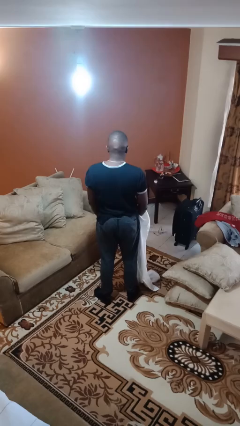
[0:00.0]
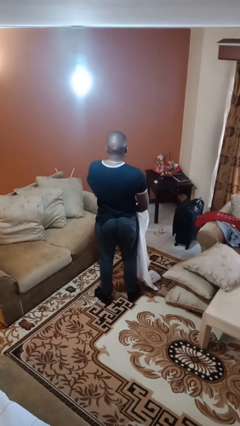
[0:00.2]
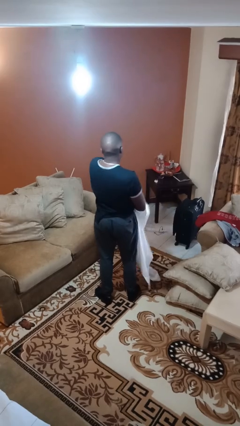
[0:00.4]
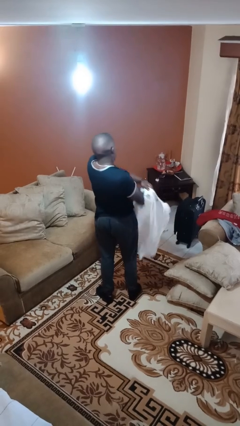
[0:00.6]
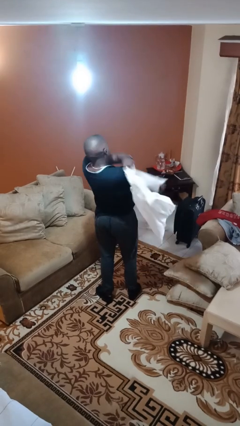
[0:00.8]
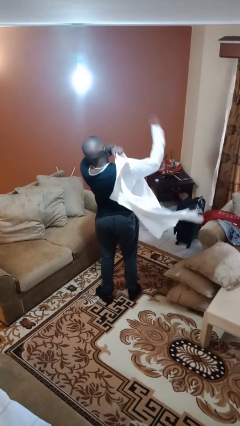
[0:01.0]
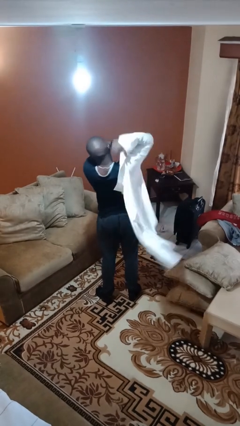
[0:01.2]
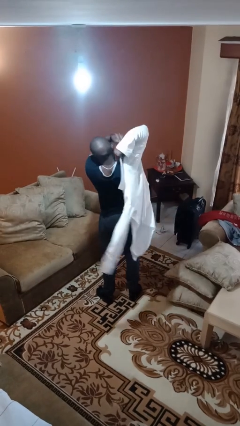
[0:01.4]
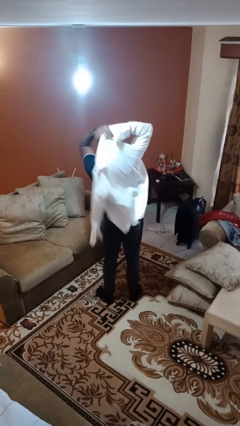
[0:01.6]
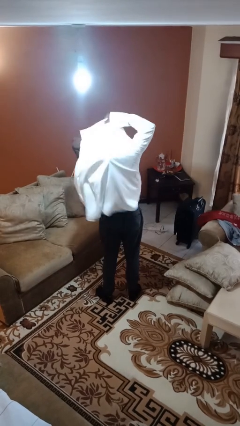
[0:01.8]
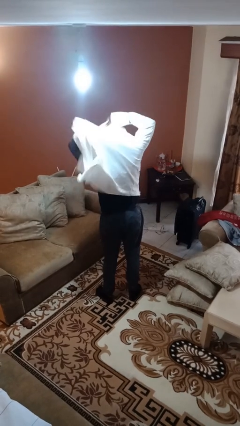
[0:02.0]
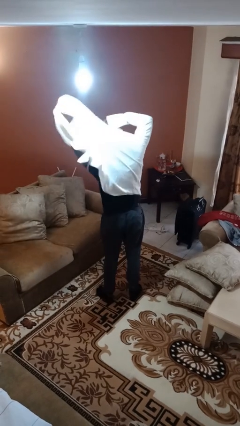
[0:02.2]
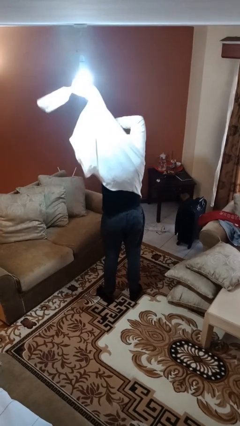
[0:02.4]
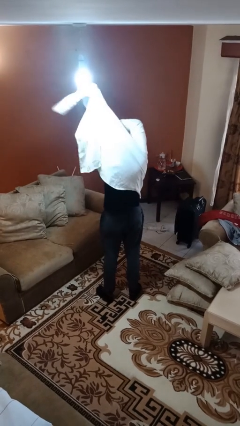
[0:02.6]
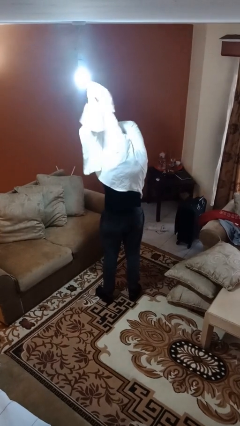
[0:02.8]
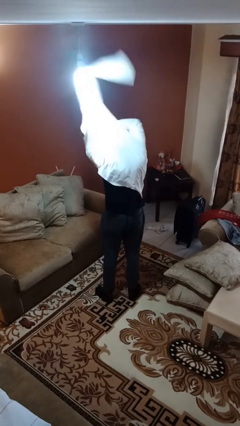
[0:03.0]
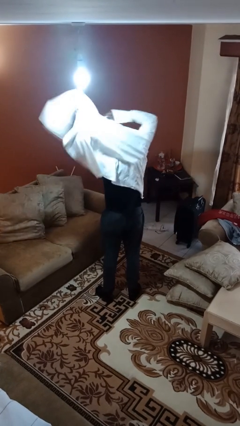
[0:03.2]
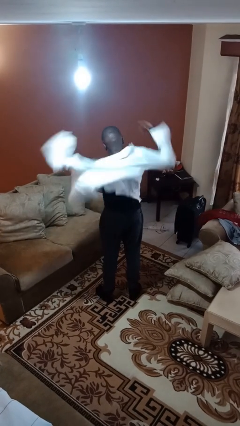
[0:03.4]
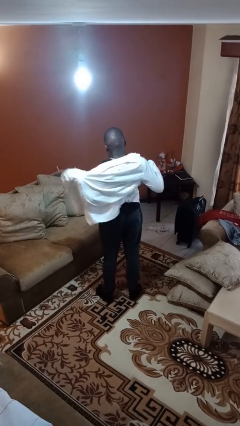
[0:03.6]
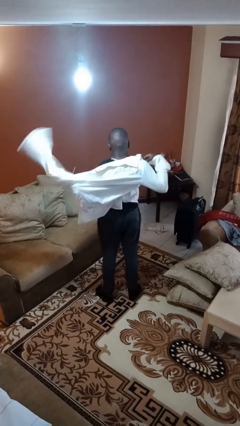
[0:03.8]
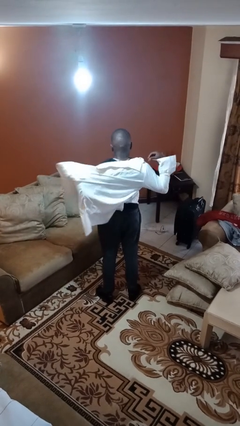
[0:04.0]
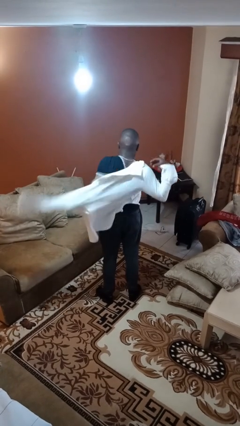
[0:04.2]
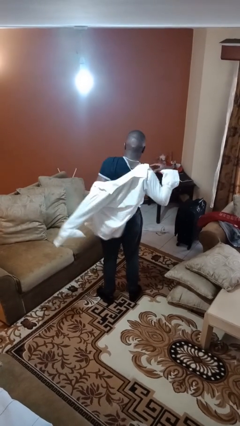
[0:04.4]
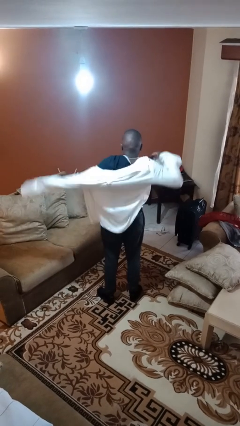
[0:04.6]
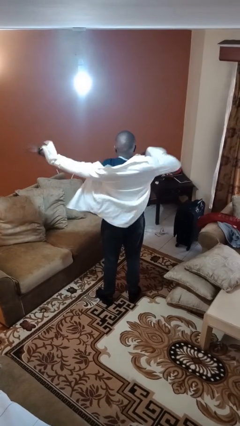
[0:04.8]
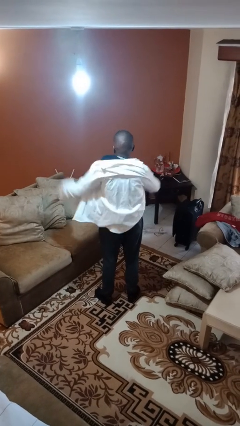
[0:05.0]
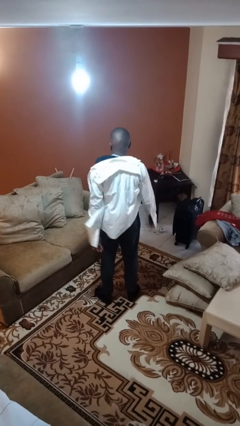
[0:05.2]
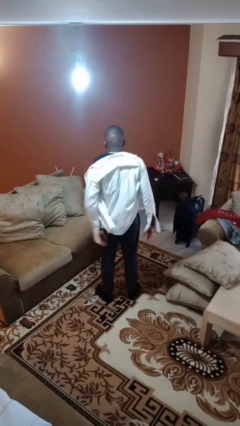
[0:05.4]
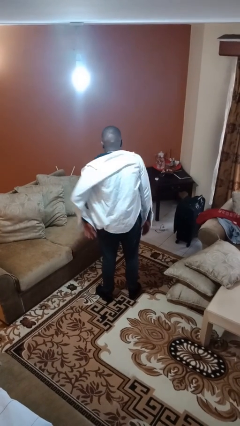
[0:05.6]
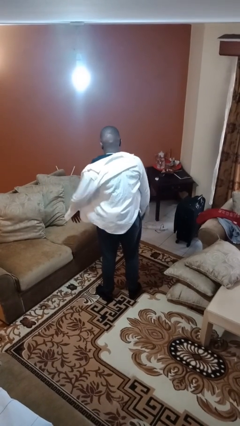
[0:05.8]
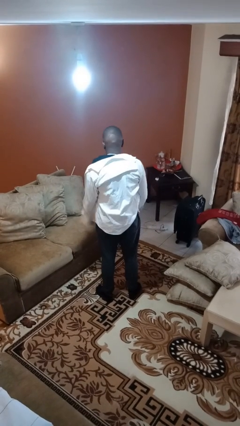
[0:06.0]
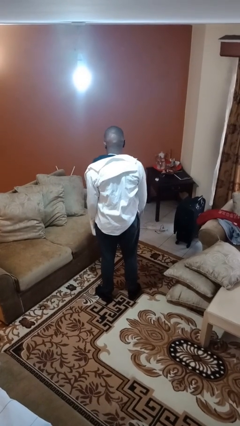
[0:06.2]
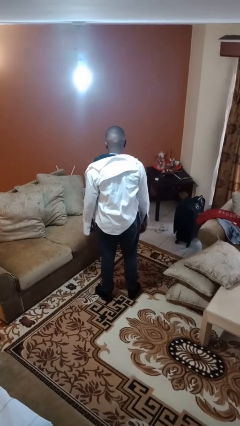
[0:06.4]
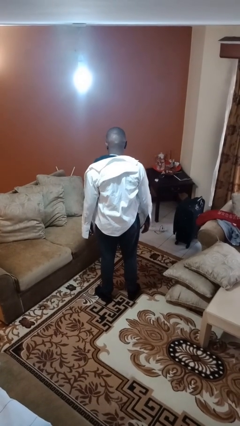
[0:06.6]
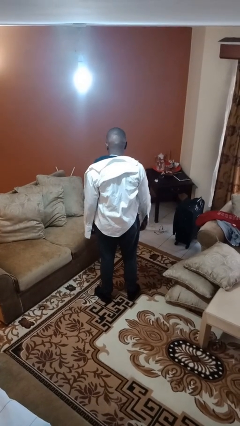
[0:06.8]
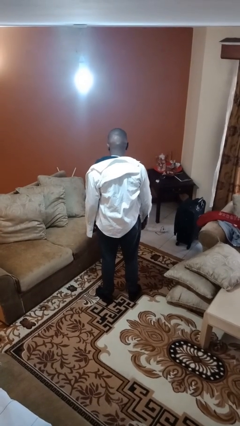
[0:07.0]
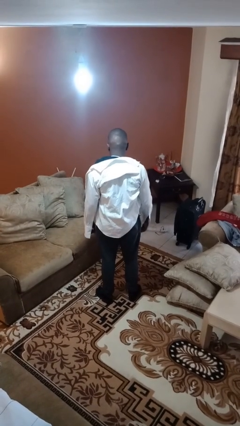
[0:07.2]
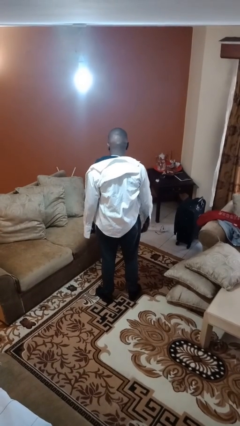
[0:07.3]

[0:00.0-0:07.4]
person puts on shirt

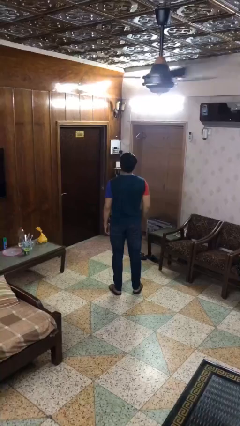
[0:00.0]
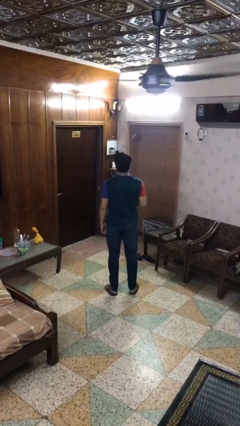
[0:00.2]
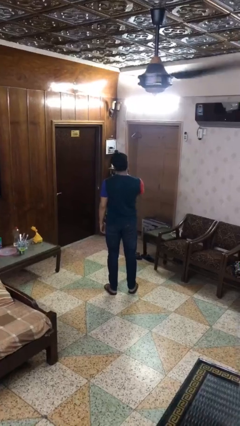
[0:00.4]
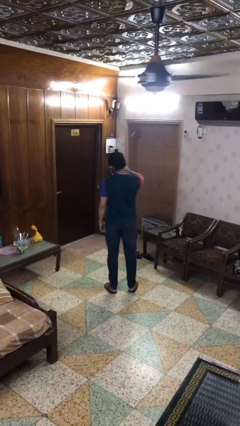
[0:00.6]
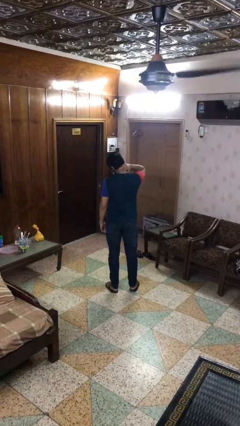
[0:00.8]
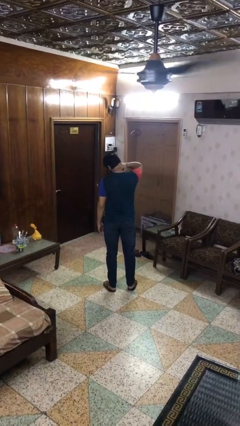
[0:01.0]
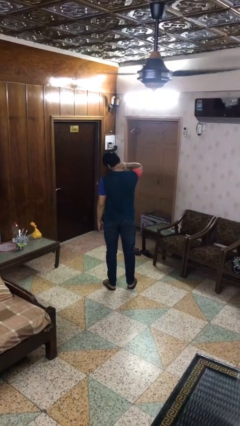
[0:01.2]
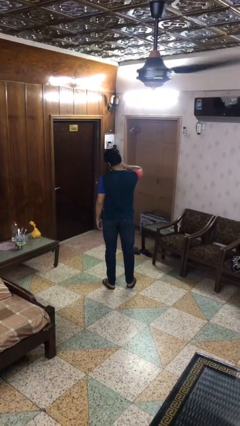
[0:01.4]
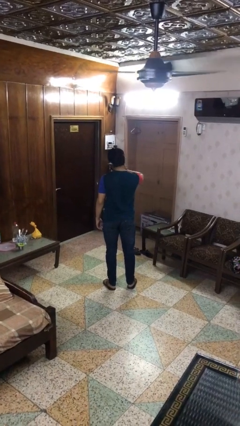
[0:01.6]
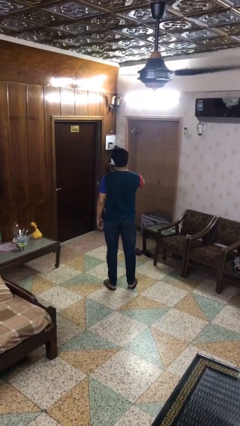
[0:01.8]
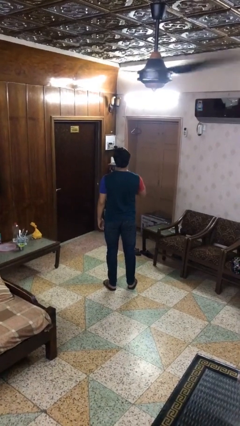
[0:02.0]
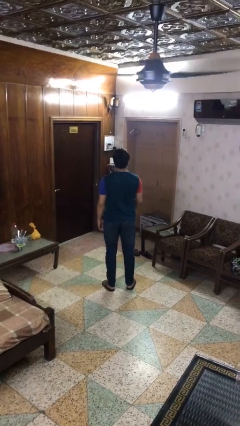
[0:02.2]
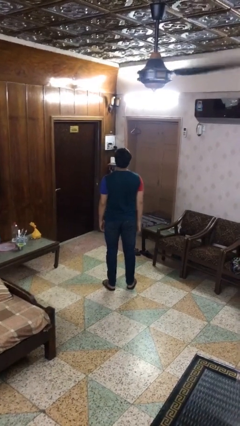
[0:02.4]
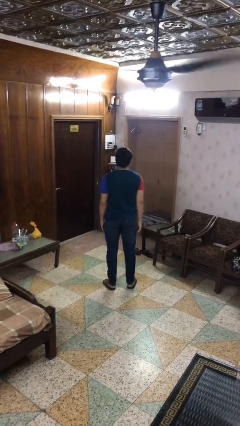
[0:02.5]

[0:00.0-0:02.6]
person rubs neck

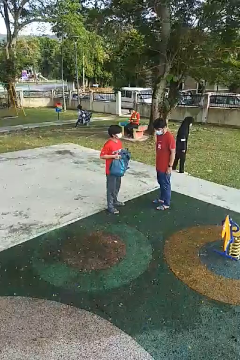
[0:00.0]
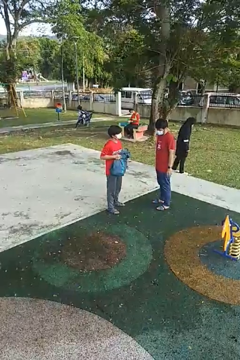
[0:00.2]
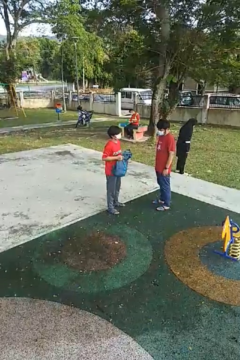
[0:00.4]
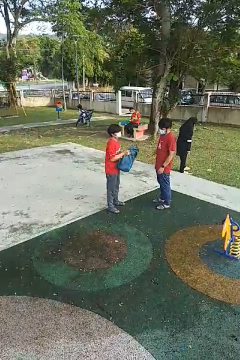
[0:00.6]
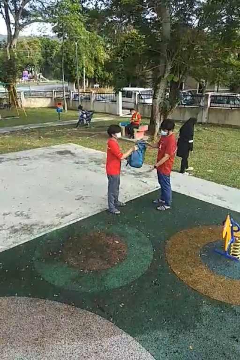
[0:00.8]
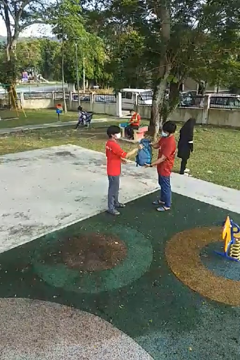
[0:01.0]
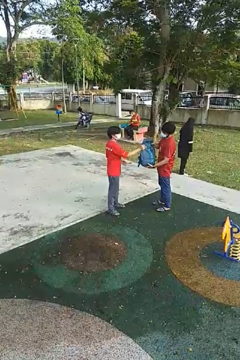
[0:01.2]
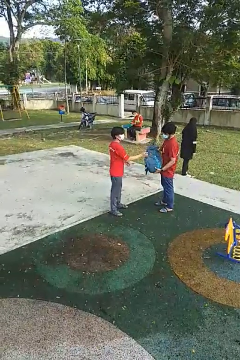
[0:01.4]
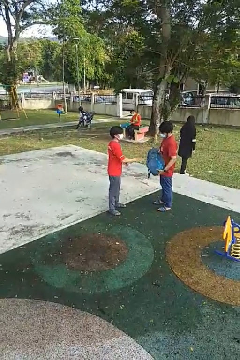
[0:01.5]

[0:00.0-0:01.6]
person transfers object to person

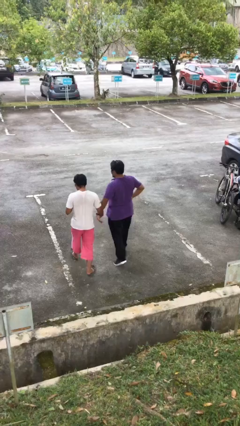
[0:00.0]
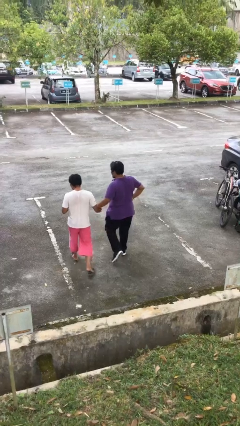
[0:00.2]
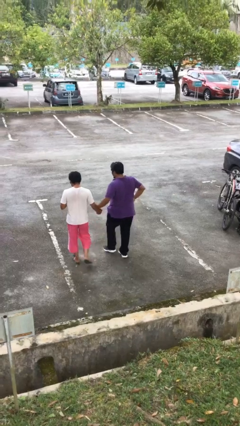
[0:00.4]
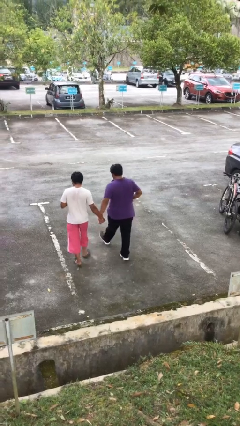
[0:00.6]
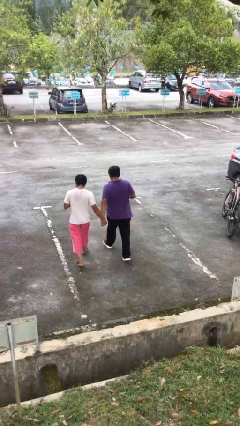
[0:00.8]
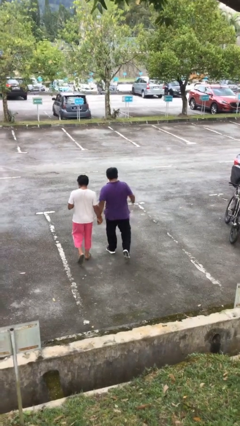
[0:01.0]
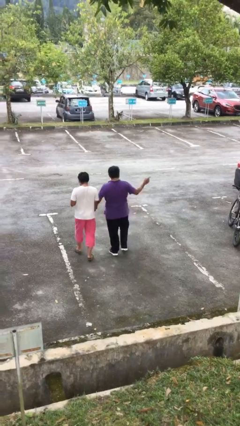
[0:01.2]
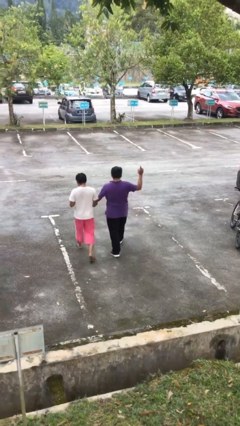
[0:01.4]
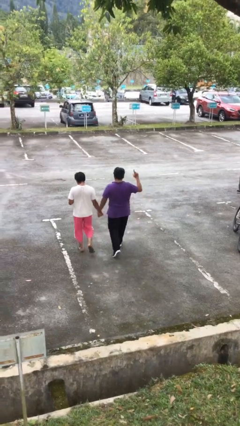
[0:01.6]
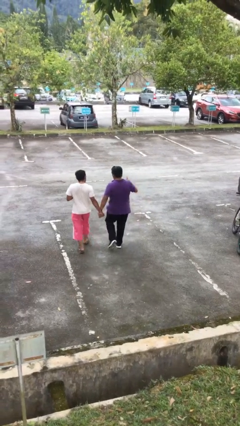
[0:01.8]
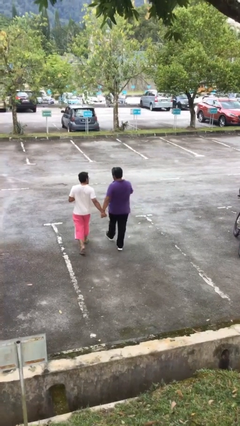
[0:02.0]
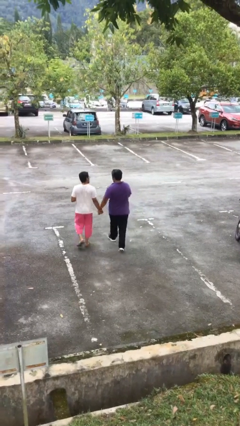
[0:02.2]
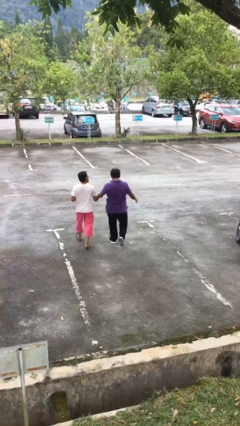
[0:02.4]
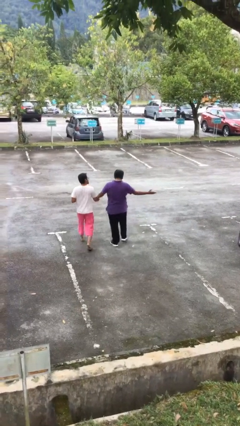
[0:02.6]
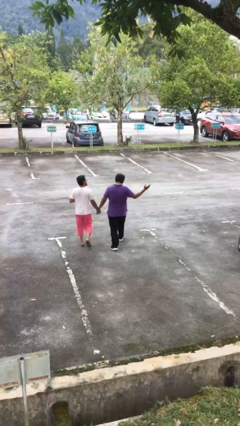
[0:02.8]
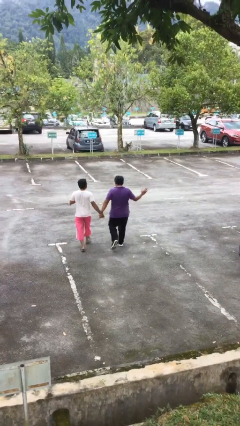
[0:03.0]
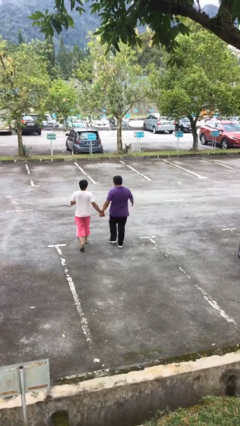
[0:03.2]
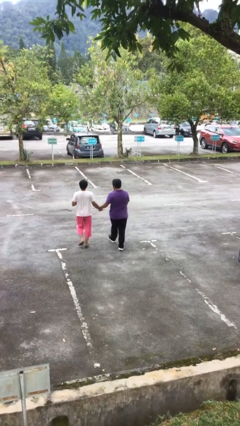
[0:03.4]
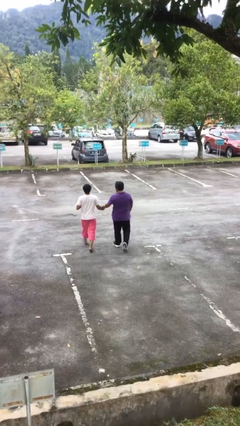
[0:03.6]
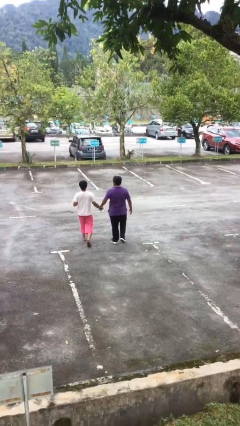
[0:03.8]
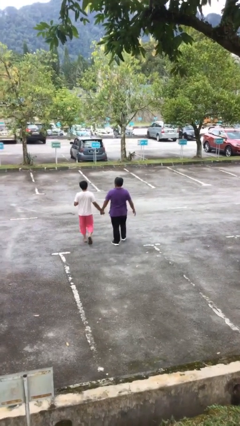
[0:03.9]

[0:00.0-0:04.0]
person holds hand

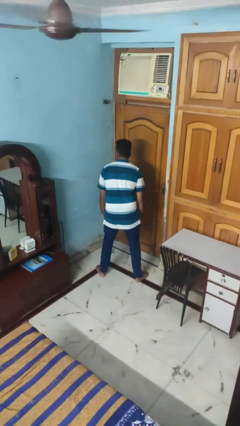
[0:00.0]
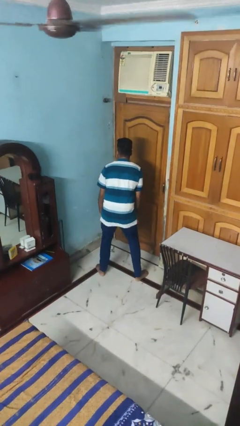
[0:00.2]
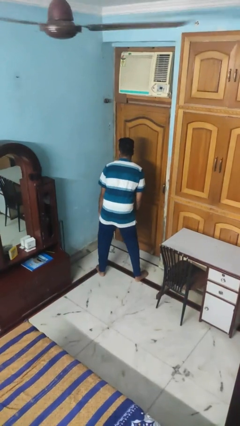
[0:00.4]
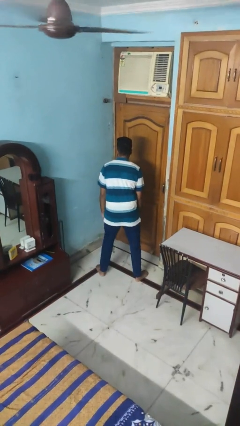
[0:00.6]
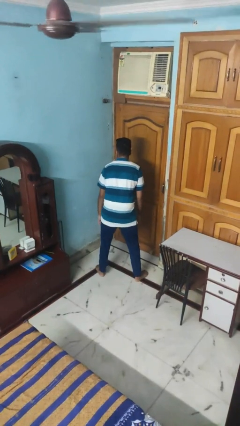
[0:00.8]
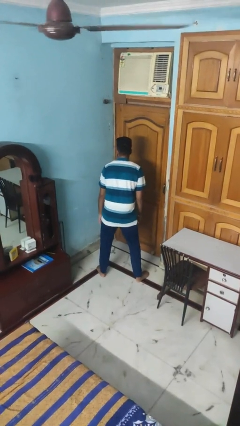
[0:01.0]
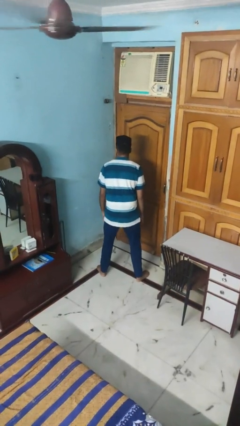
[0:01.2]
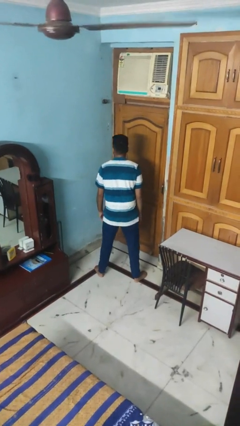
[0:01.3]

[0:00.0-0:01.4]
person wiggles hips

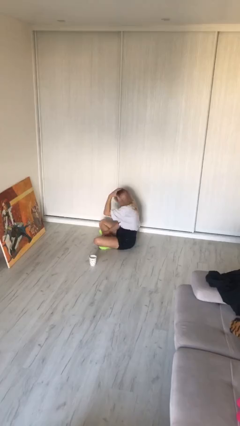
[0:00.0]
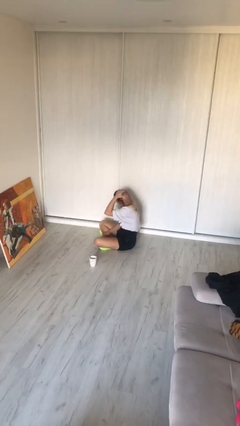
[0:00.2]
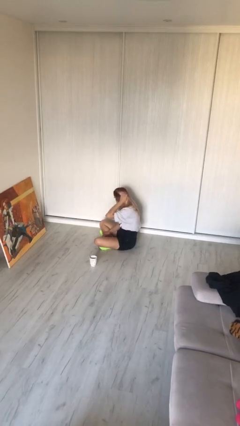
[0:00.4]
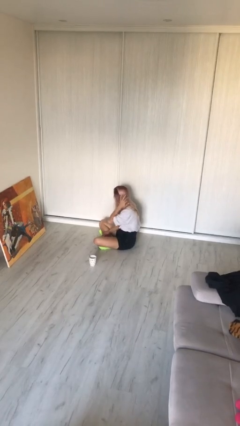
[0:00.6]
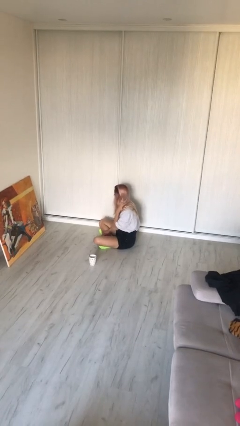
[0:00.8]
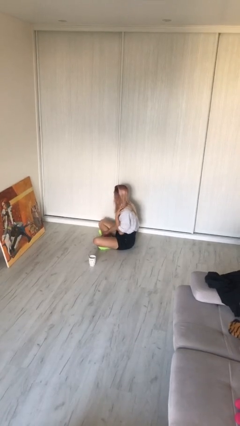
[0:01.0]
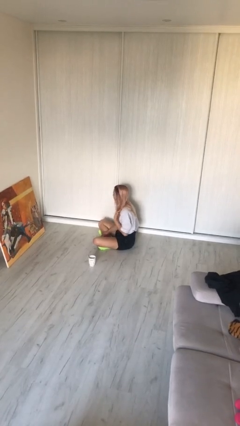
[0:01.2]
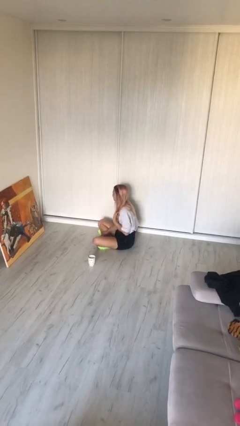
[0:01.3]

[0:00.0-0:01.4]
person strokes hair
